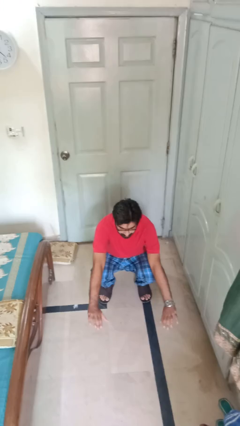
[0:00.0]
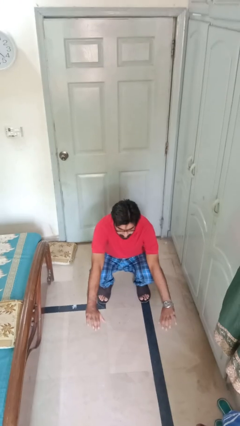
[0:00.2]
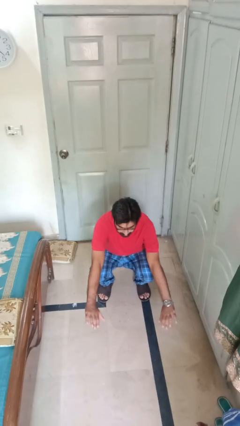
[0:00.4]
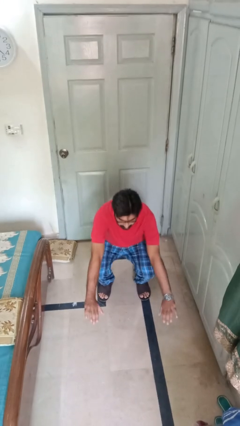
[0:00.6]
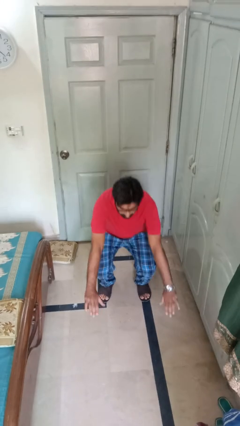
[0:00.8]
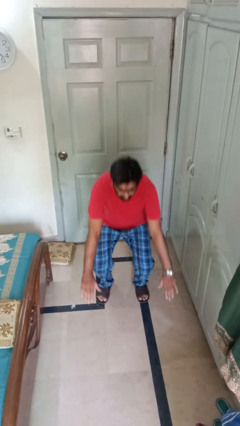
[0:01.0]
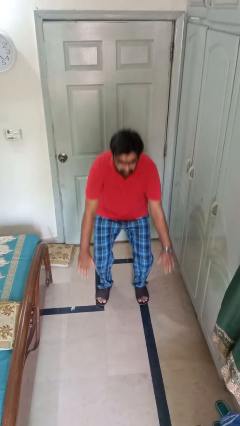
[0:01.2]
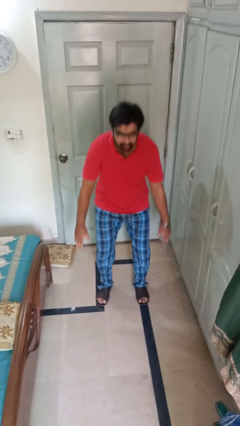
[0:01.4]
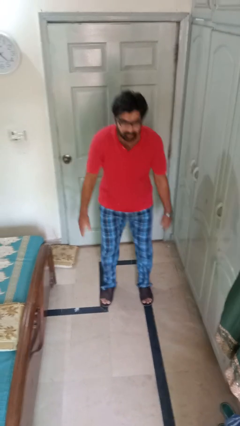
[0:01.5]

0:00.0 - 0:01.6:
person stands up

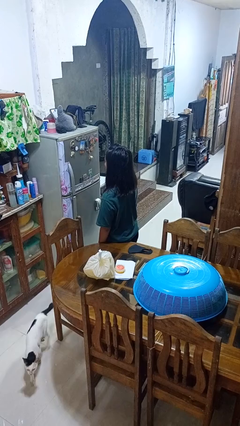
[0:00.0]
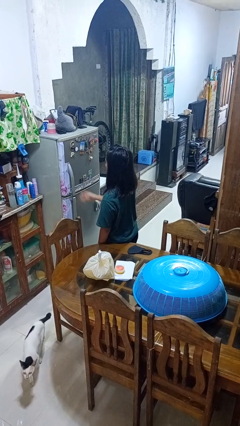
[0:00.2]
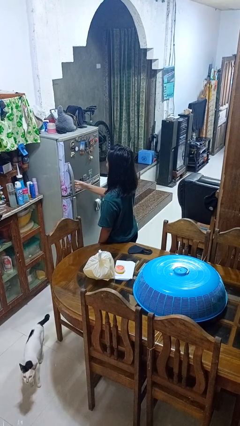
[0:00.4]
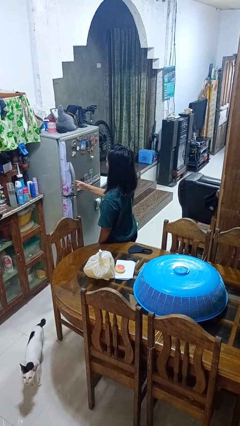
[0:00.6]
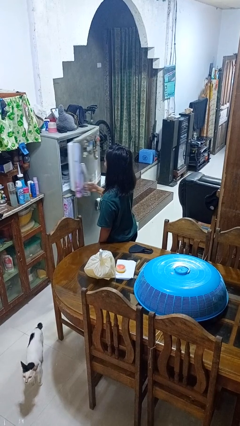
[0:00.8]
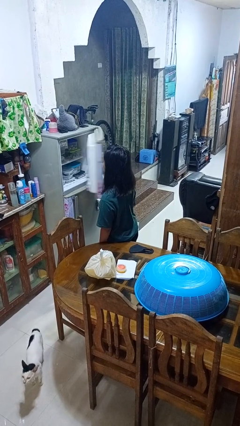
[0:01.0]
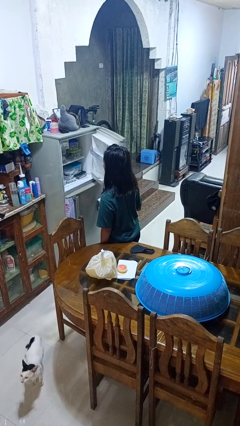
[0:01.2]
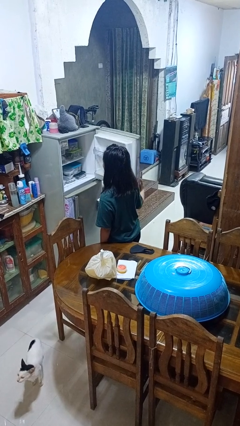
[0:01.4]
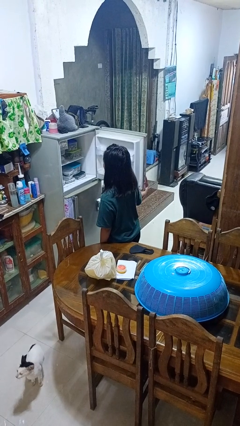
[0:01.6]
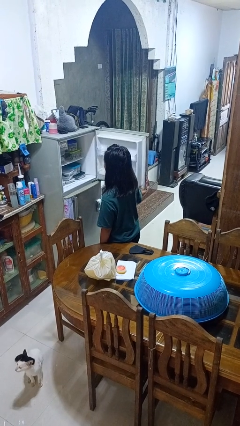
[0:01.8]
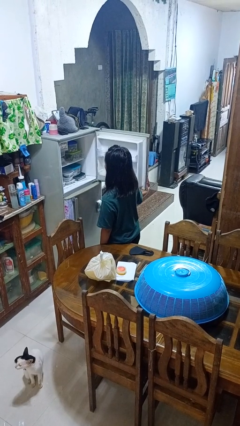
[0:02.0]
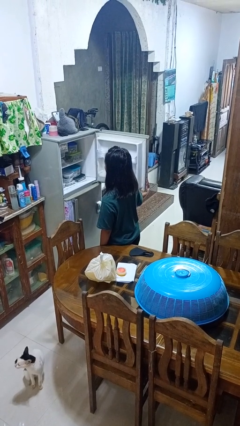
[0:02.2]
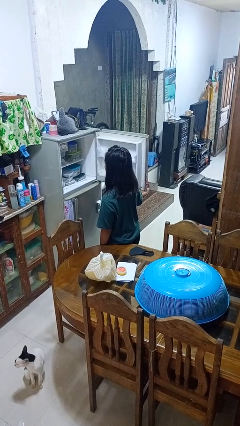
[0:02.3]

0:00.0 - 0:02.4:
person opens refrigerator

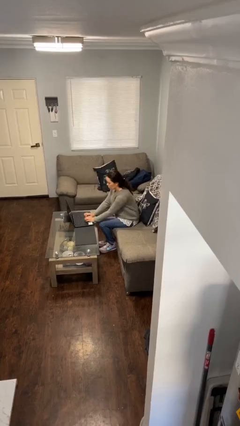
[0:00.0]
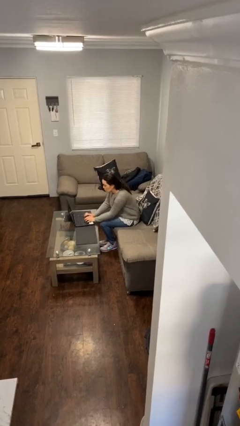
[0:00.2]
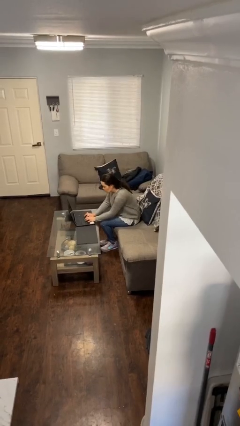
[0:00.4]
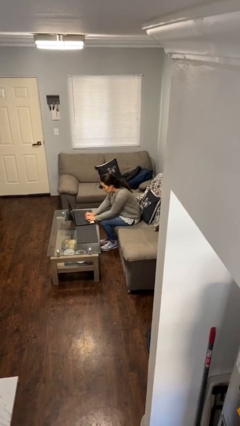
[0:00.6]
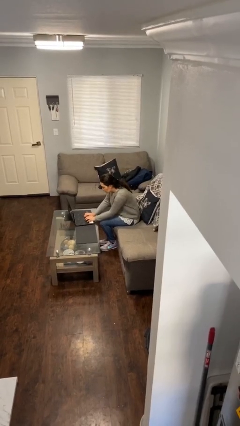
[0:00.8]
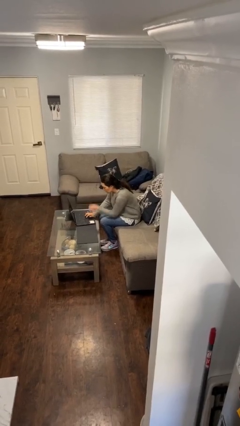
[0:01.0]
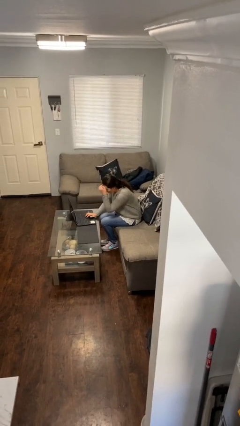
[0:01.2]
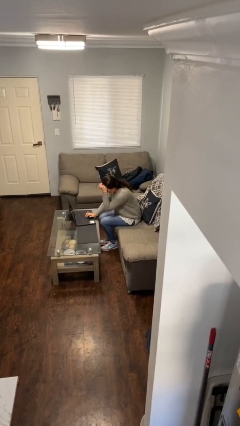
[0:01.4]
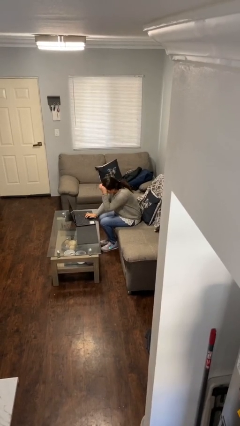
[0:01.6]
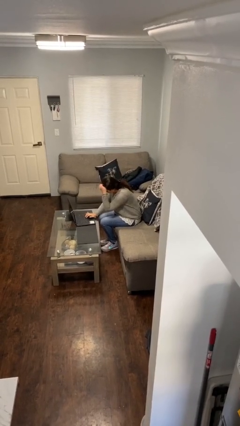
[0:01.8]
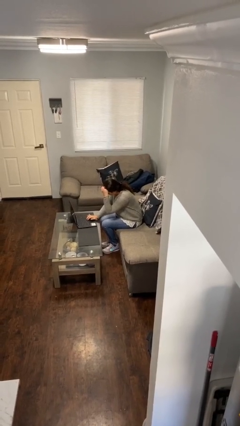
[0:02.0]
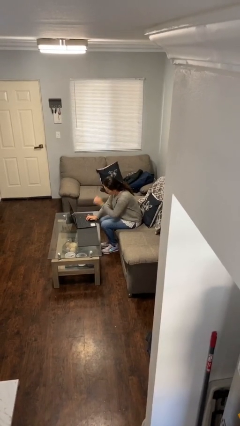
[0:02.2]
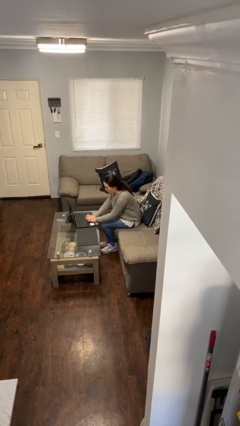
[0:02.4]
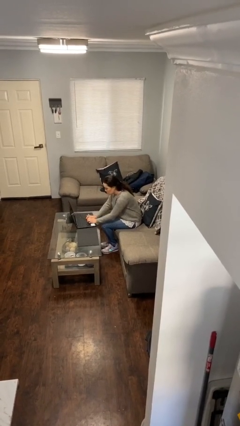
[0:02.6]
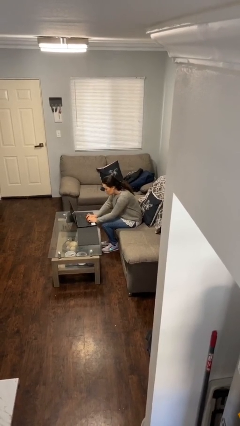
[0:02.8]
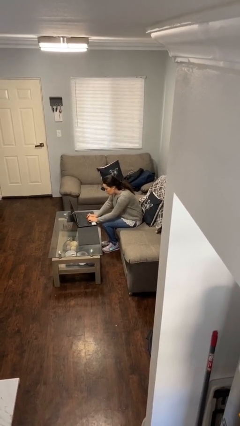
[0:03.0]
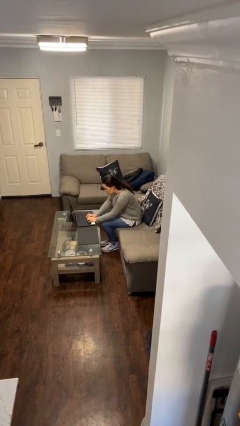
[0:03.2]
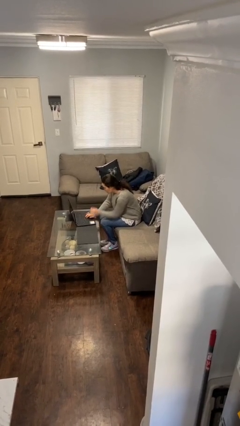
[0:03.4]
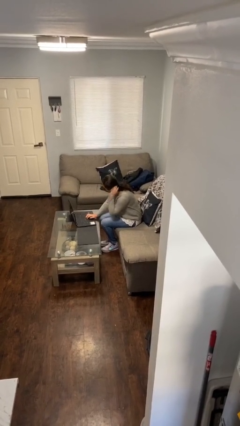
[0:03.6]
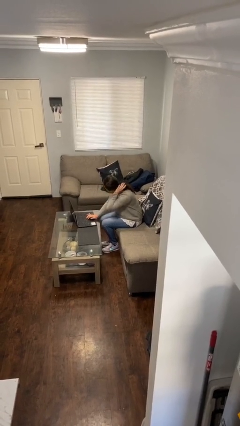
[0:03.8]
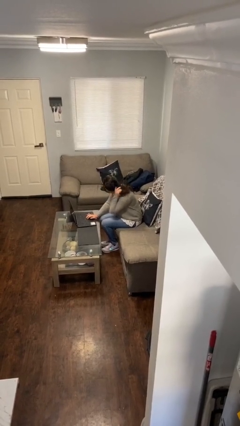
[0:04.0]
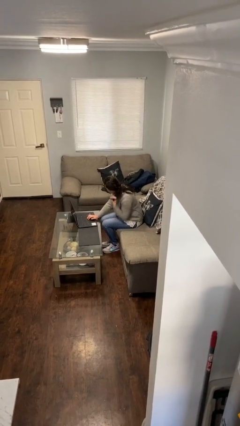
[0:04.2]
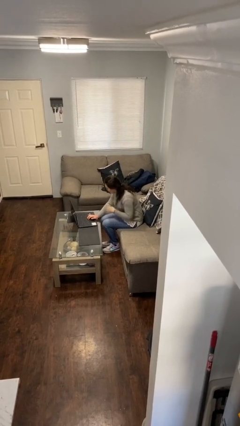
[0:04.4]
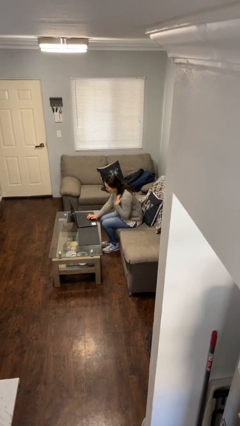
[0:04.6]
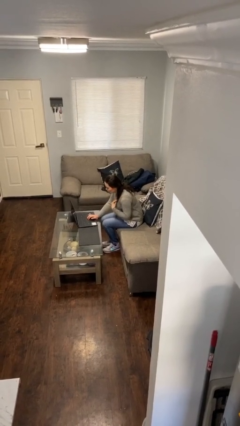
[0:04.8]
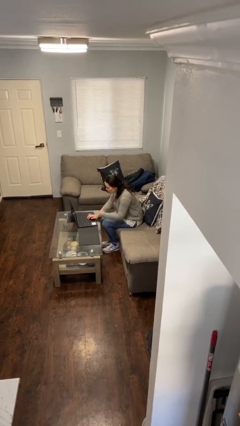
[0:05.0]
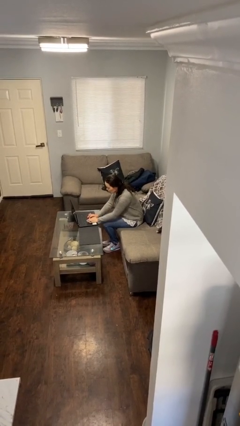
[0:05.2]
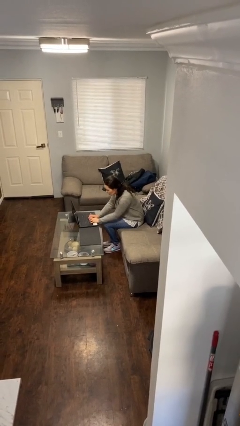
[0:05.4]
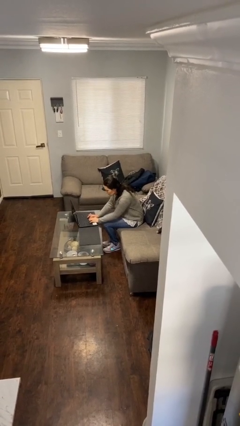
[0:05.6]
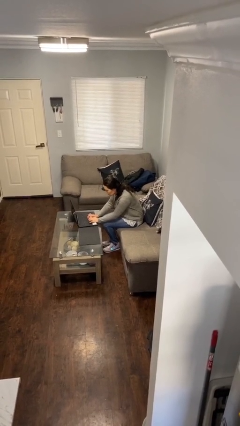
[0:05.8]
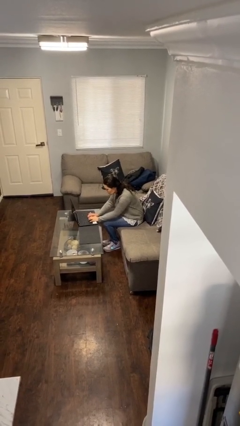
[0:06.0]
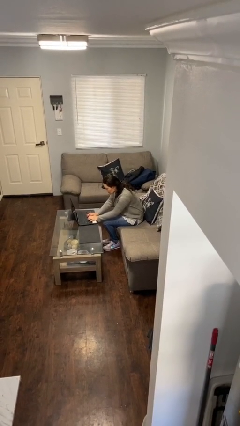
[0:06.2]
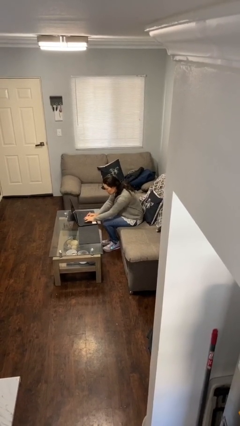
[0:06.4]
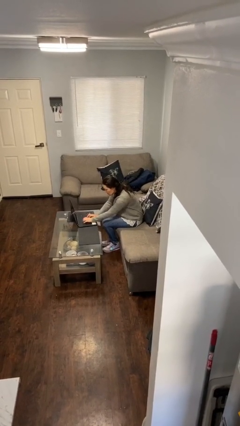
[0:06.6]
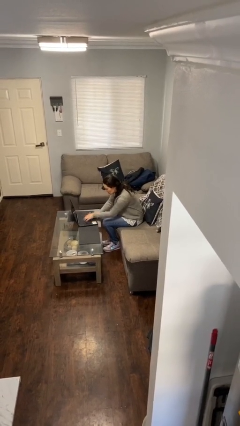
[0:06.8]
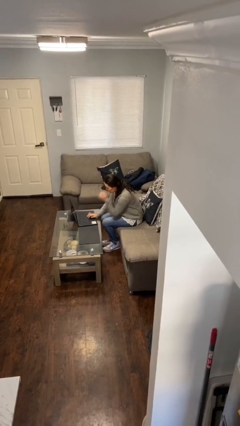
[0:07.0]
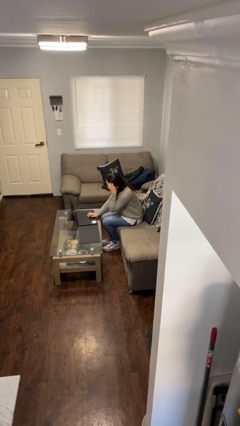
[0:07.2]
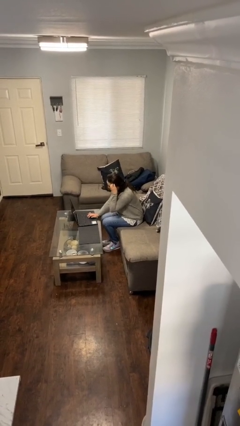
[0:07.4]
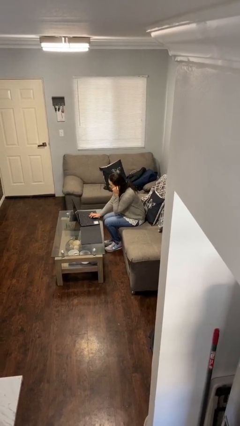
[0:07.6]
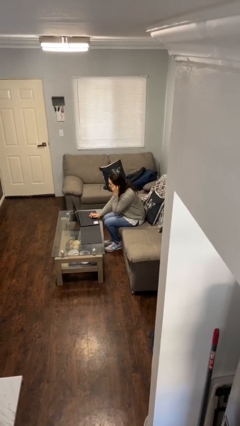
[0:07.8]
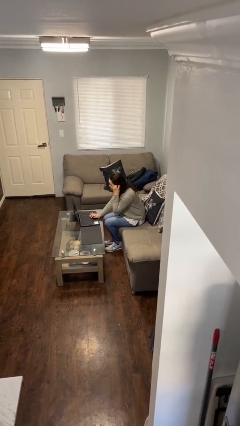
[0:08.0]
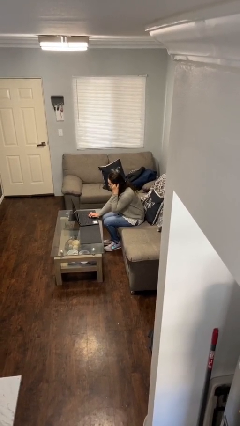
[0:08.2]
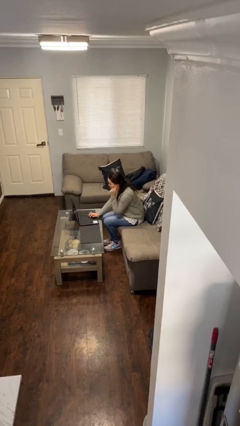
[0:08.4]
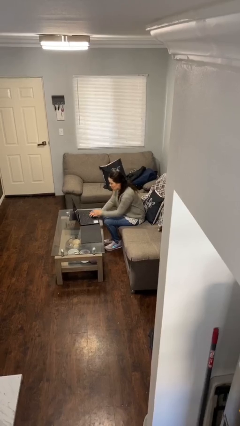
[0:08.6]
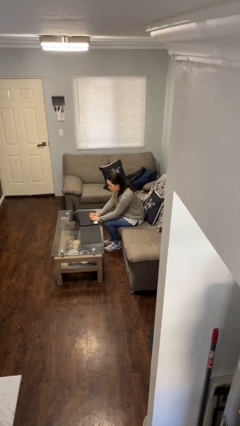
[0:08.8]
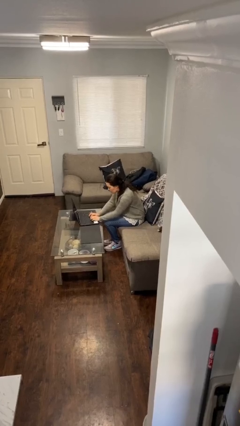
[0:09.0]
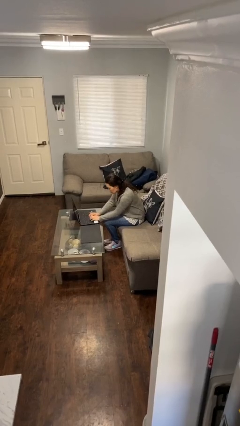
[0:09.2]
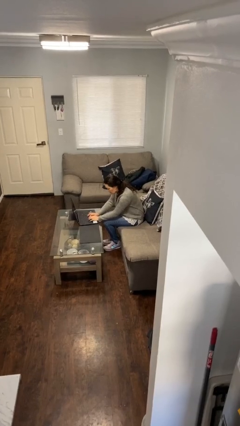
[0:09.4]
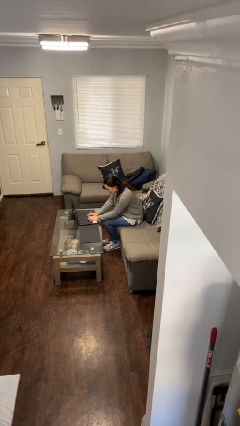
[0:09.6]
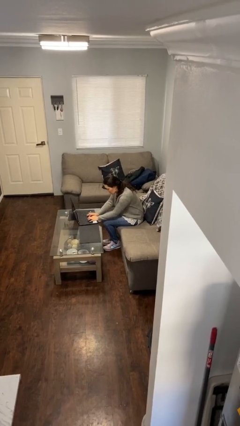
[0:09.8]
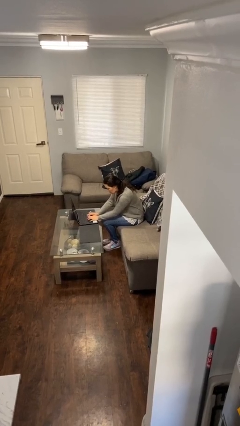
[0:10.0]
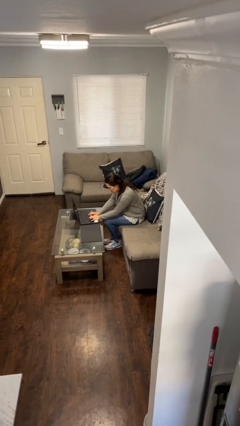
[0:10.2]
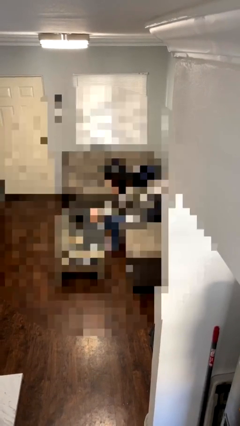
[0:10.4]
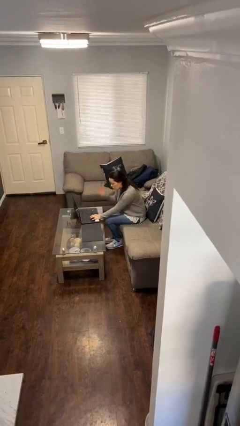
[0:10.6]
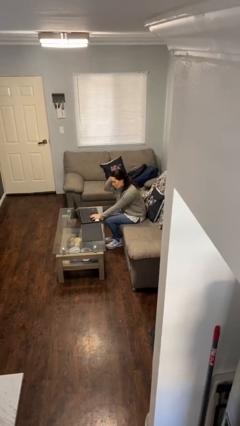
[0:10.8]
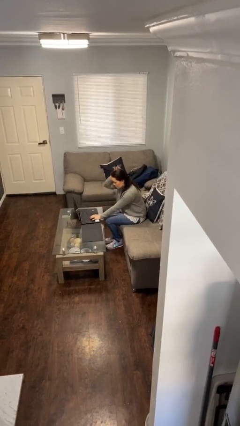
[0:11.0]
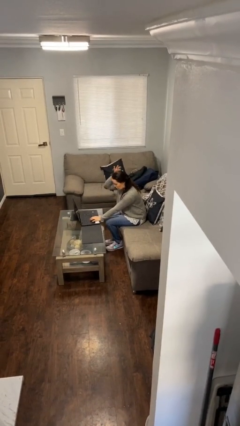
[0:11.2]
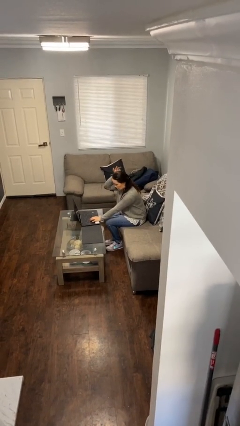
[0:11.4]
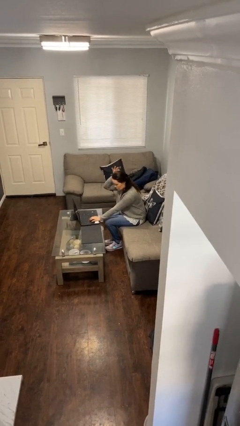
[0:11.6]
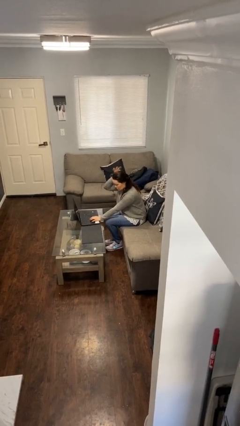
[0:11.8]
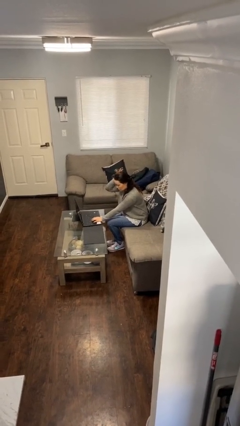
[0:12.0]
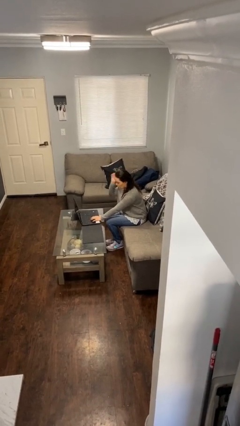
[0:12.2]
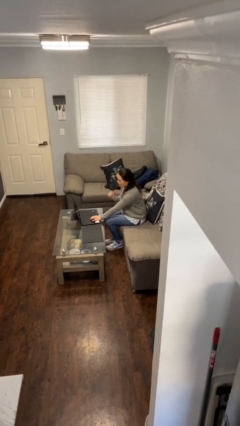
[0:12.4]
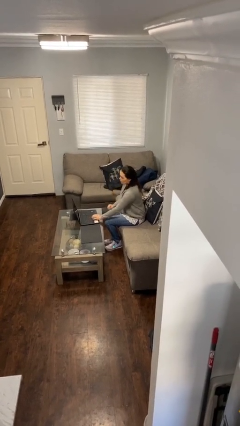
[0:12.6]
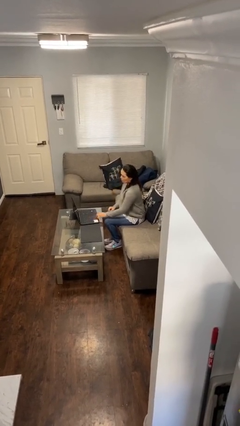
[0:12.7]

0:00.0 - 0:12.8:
person interacts with laptop

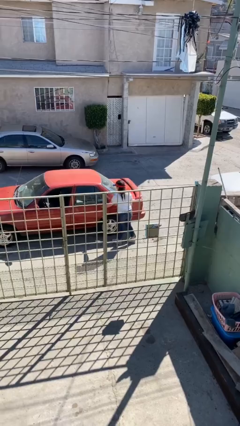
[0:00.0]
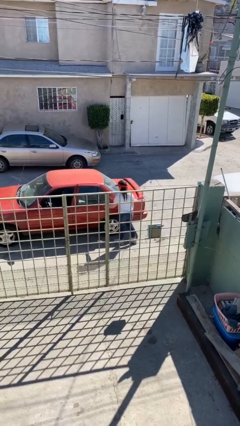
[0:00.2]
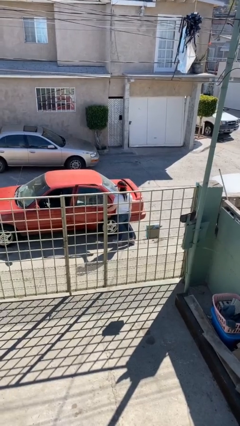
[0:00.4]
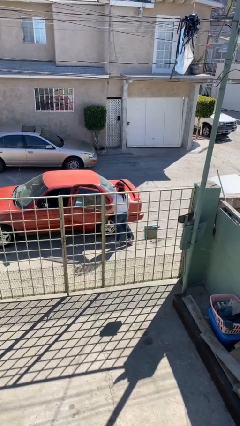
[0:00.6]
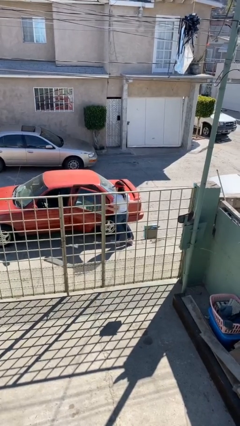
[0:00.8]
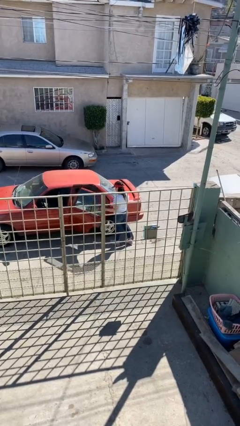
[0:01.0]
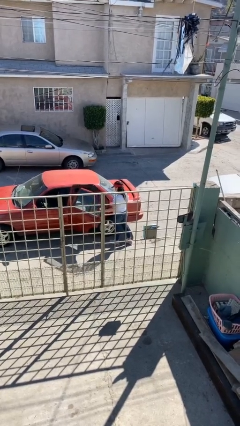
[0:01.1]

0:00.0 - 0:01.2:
person opens car door
